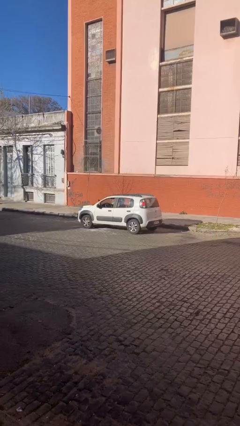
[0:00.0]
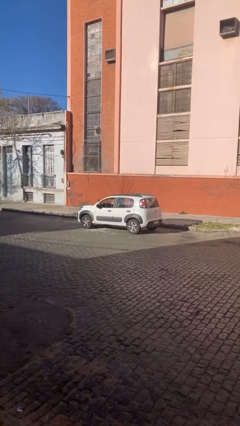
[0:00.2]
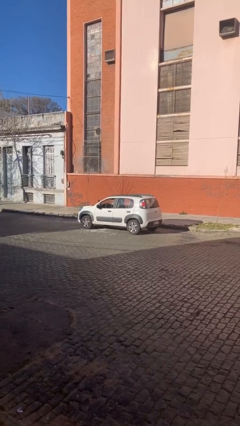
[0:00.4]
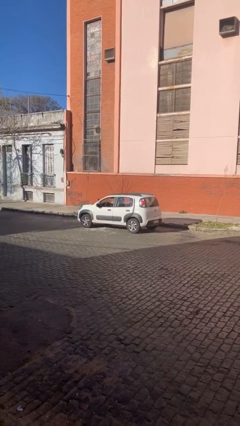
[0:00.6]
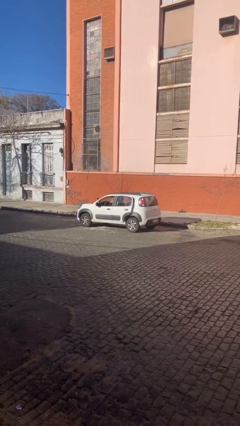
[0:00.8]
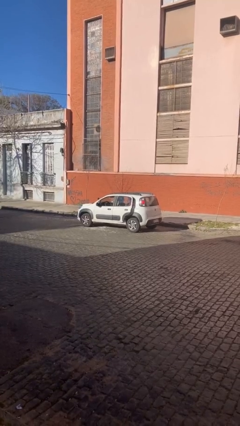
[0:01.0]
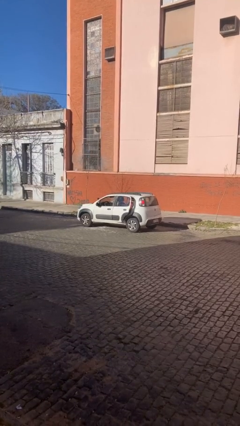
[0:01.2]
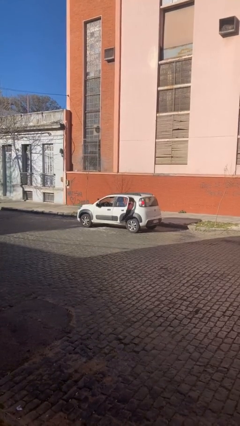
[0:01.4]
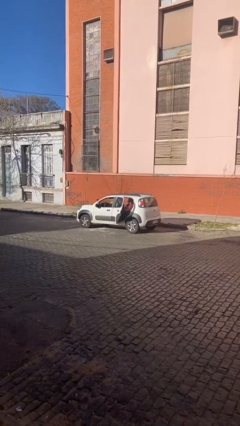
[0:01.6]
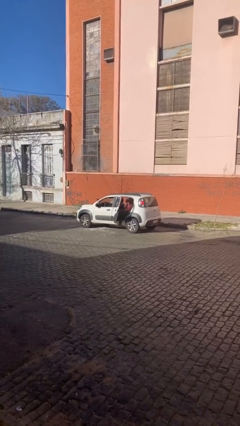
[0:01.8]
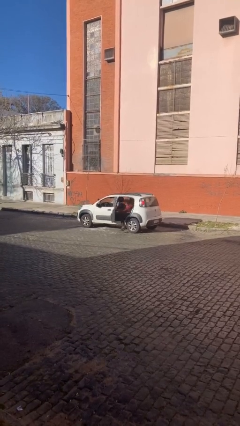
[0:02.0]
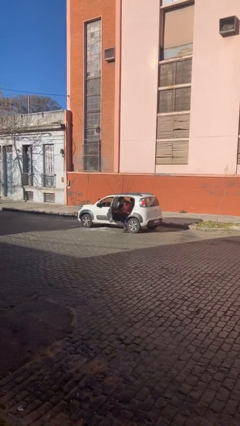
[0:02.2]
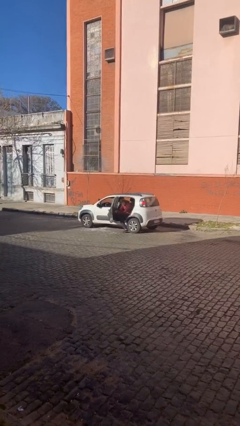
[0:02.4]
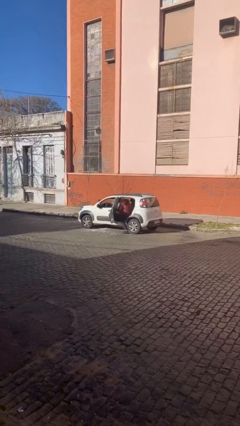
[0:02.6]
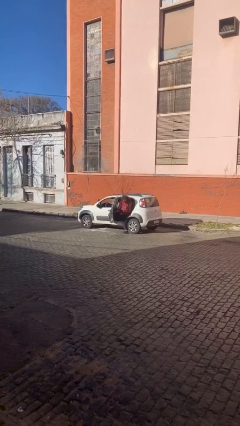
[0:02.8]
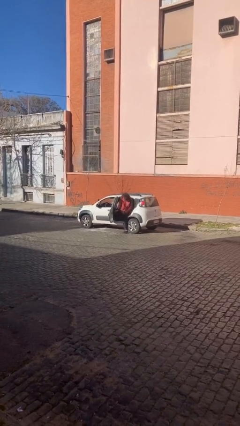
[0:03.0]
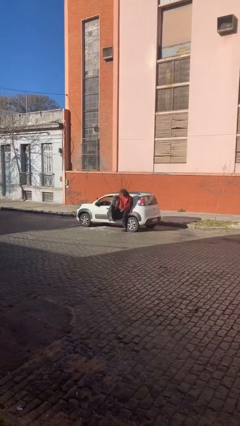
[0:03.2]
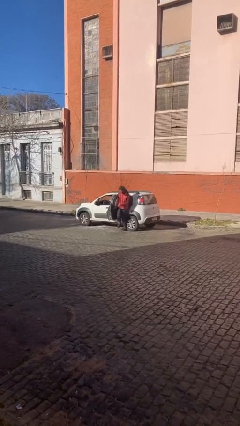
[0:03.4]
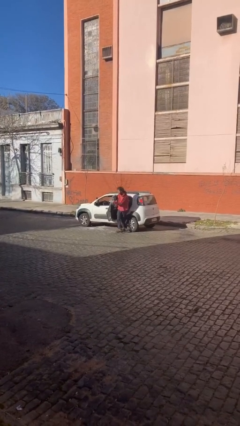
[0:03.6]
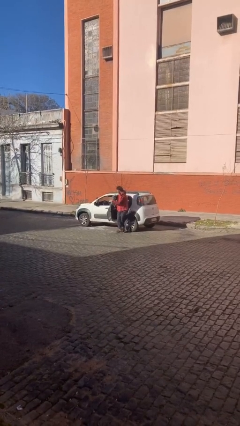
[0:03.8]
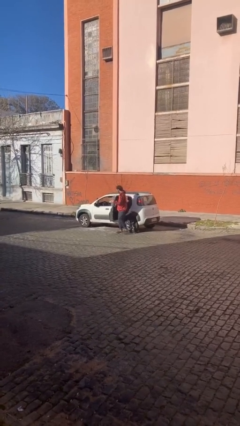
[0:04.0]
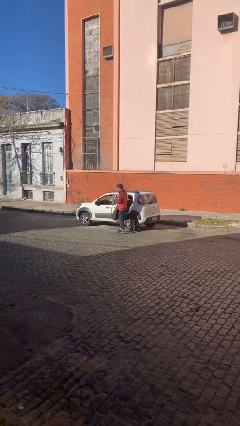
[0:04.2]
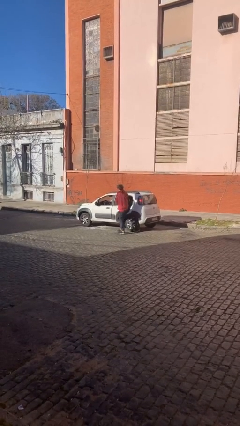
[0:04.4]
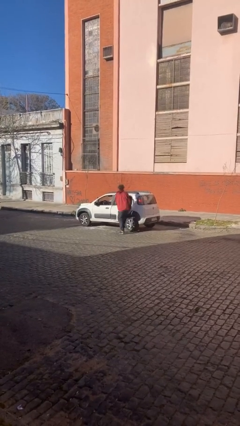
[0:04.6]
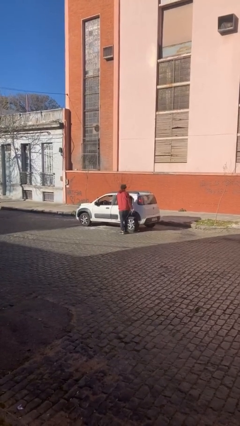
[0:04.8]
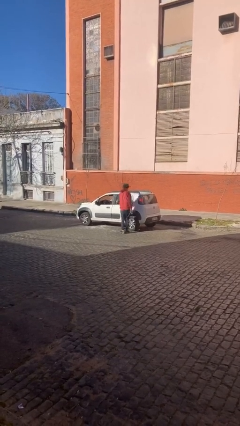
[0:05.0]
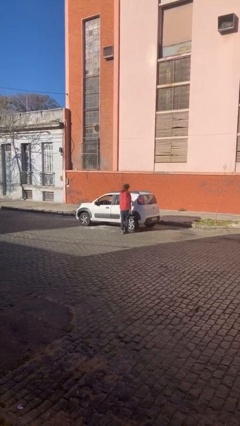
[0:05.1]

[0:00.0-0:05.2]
car drops off person

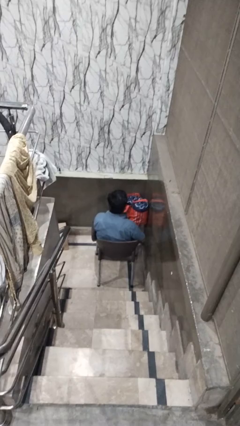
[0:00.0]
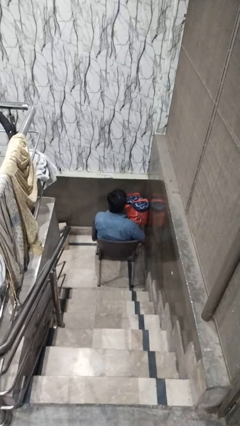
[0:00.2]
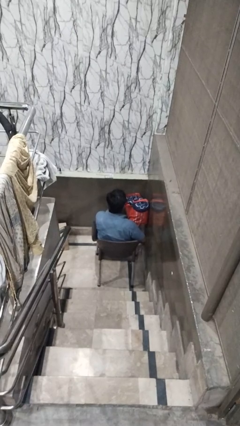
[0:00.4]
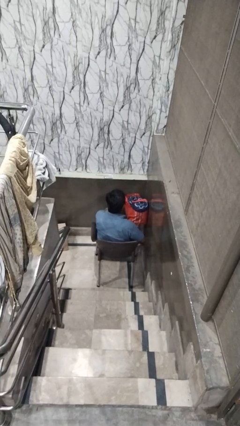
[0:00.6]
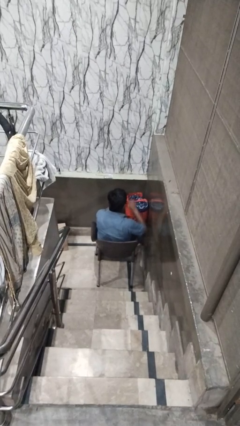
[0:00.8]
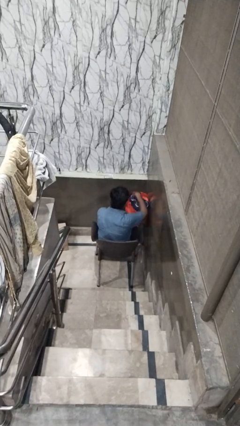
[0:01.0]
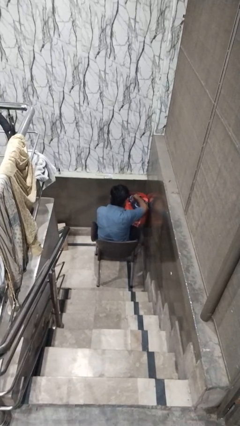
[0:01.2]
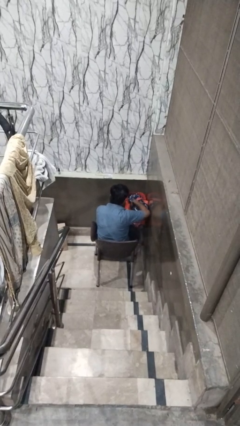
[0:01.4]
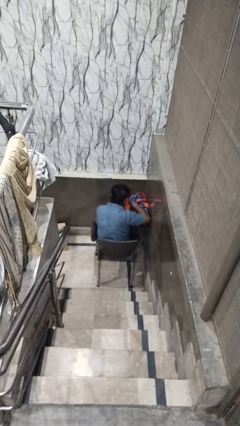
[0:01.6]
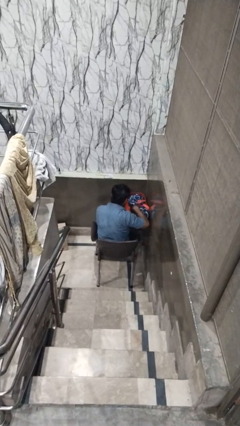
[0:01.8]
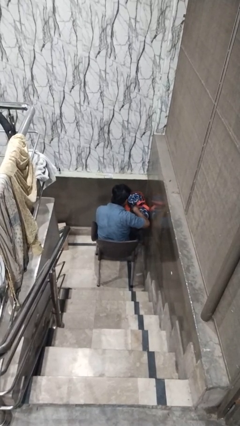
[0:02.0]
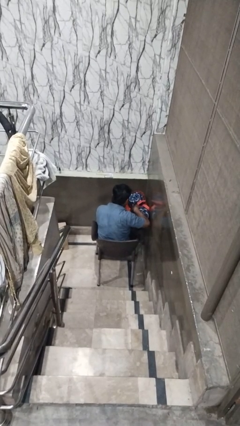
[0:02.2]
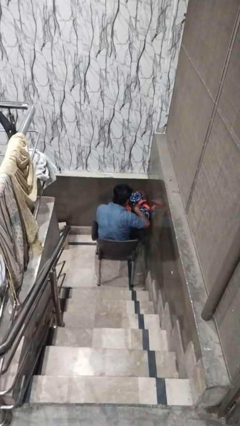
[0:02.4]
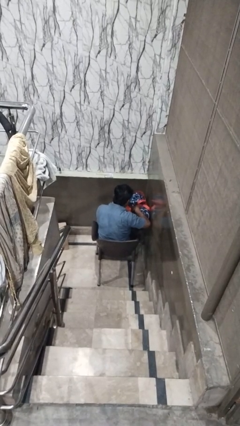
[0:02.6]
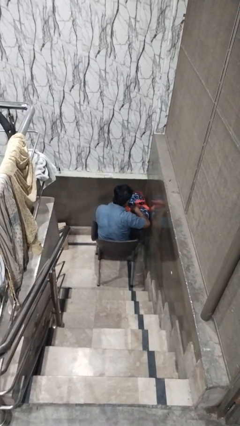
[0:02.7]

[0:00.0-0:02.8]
person searches in bag

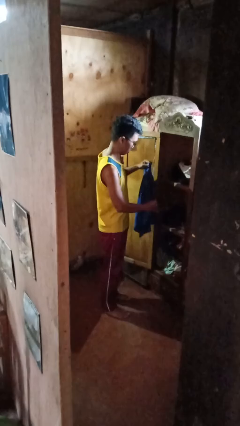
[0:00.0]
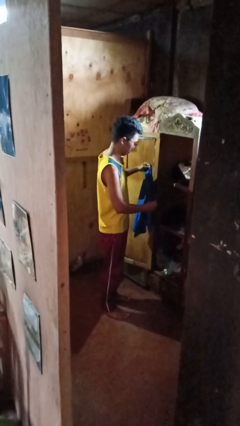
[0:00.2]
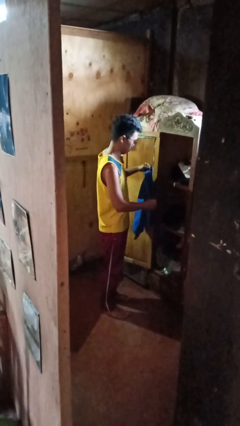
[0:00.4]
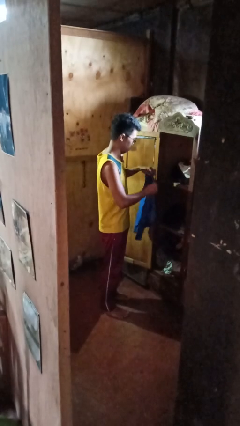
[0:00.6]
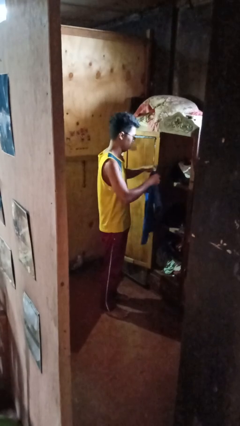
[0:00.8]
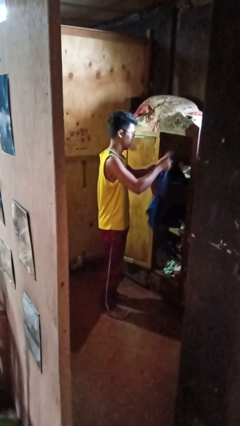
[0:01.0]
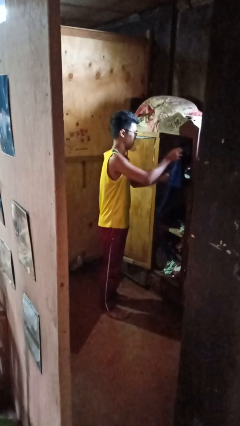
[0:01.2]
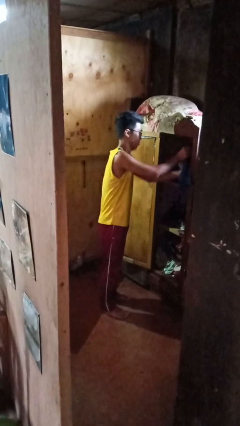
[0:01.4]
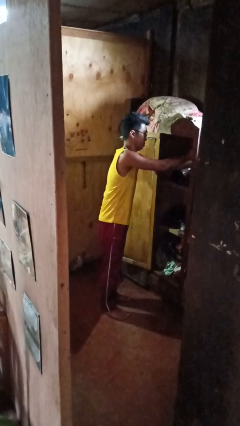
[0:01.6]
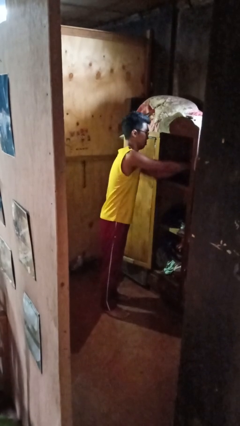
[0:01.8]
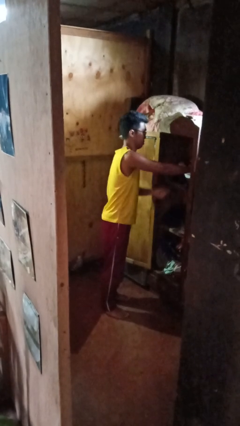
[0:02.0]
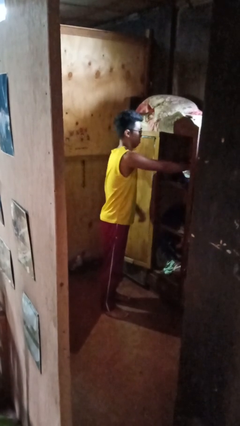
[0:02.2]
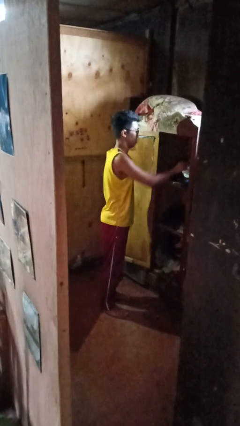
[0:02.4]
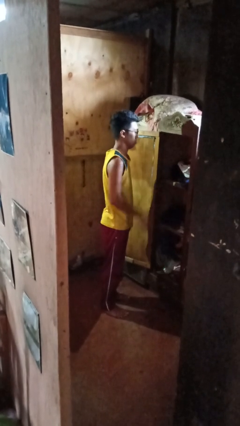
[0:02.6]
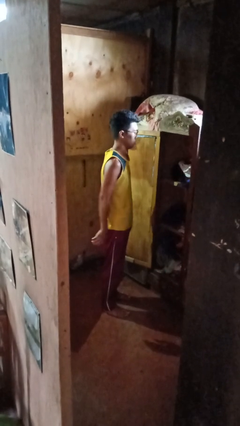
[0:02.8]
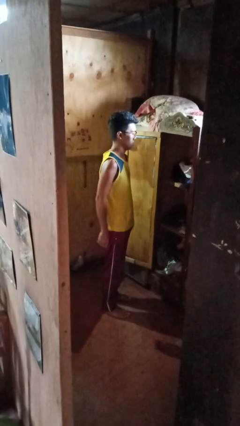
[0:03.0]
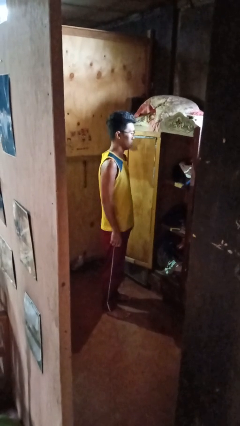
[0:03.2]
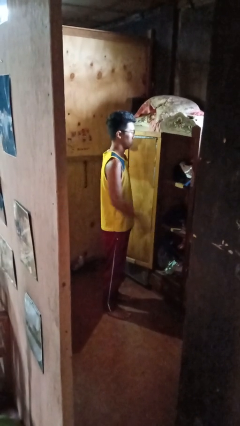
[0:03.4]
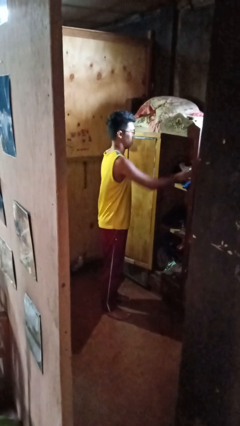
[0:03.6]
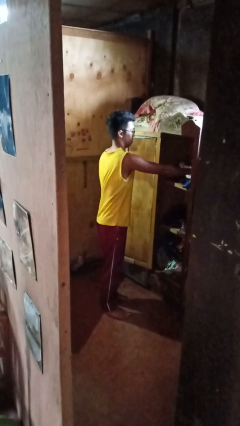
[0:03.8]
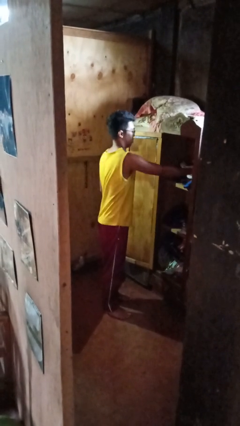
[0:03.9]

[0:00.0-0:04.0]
person puts clothes into closet

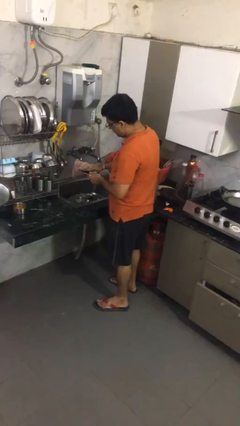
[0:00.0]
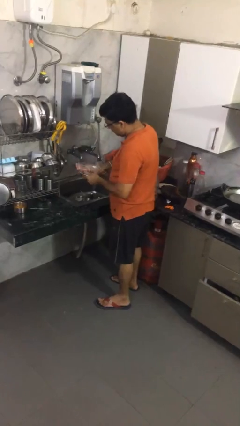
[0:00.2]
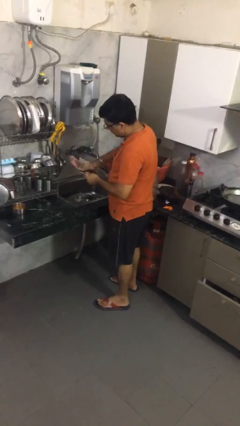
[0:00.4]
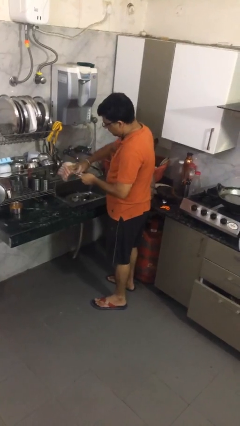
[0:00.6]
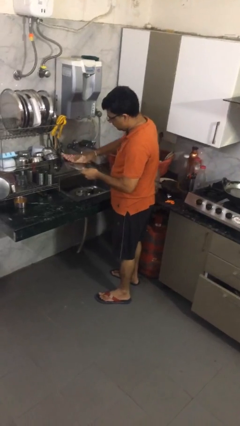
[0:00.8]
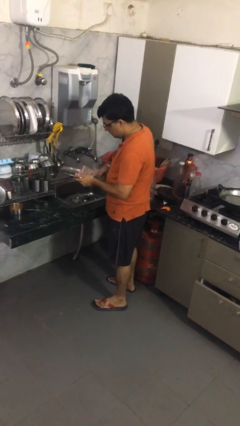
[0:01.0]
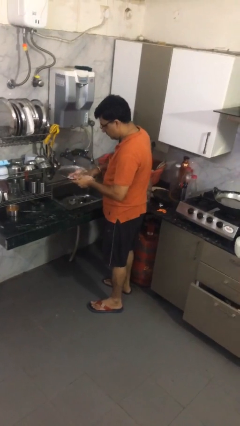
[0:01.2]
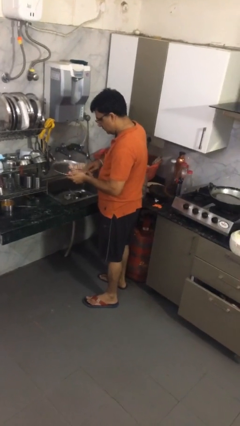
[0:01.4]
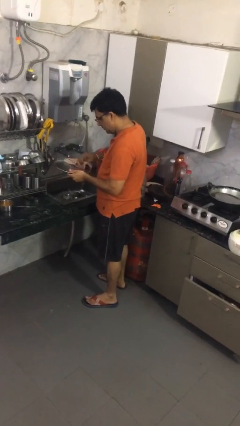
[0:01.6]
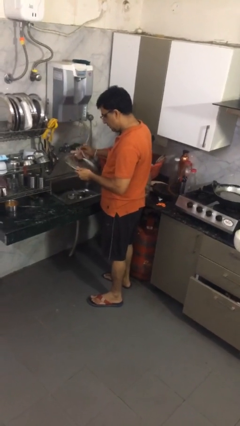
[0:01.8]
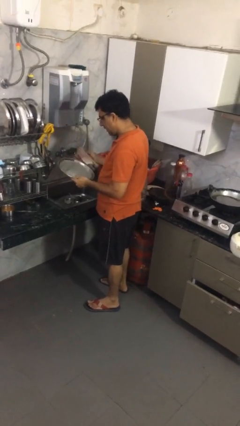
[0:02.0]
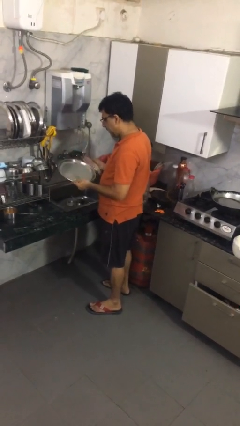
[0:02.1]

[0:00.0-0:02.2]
person dries dish

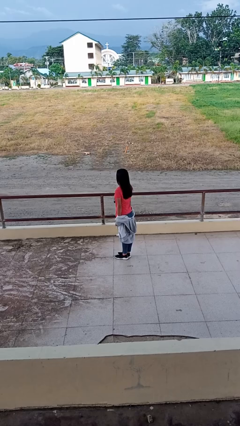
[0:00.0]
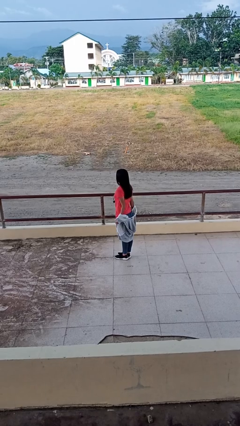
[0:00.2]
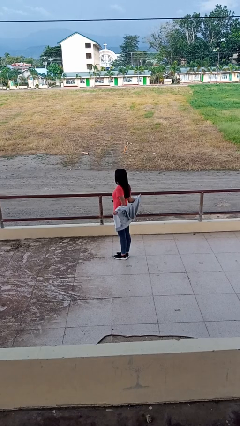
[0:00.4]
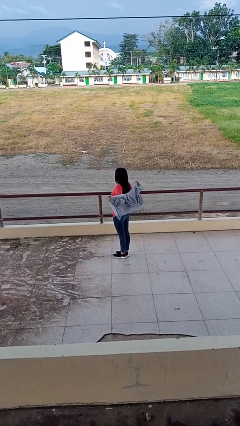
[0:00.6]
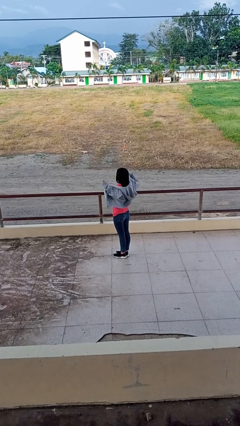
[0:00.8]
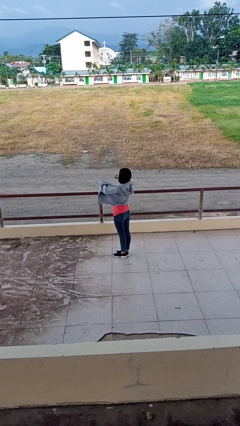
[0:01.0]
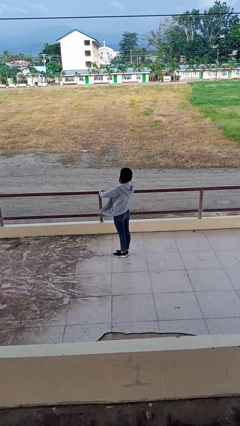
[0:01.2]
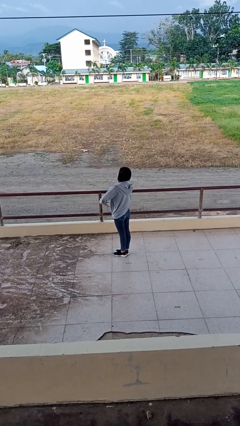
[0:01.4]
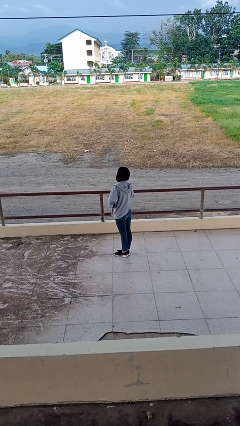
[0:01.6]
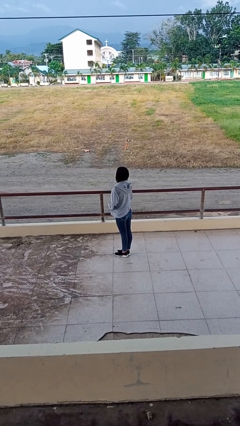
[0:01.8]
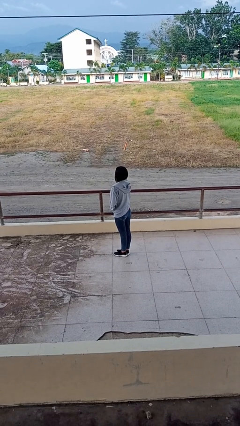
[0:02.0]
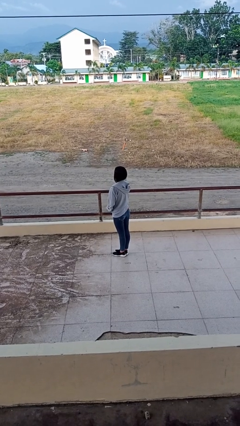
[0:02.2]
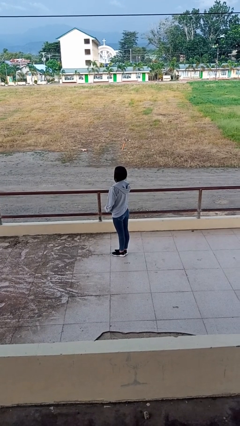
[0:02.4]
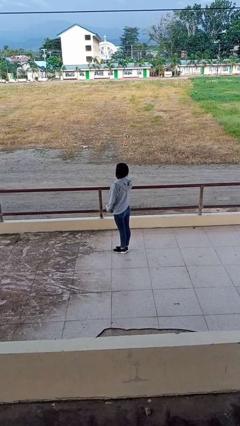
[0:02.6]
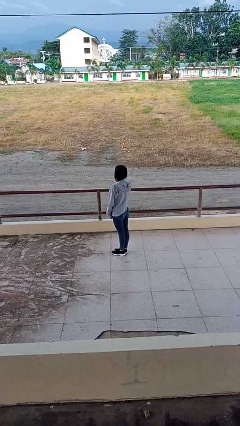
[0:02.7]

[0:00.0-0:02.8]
person puts on jacket

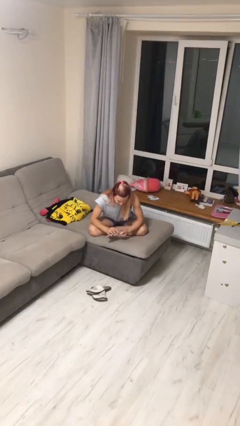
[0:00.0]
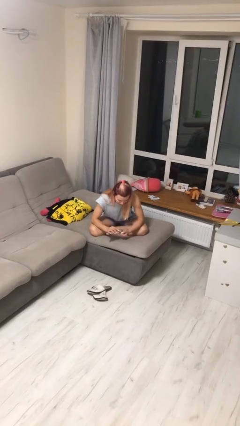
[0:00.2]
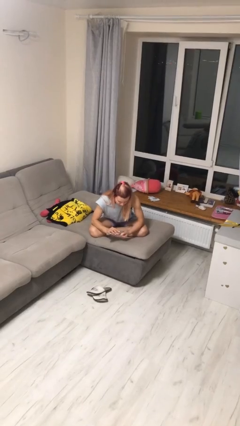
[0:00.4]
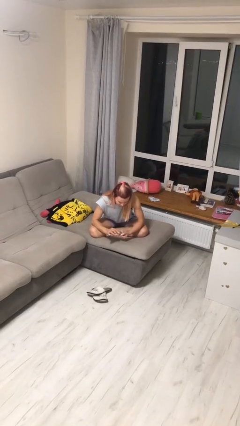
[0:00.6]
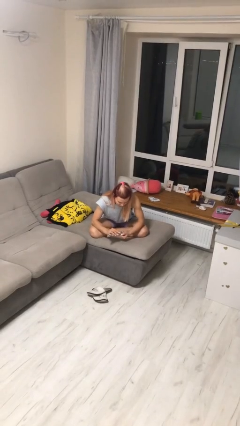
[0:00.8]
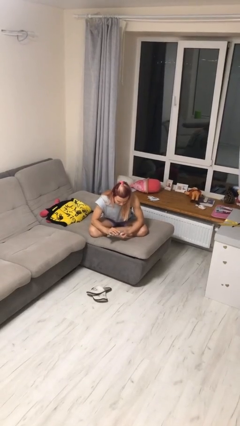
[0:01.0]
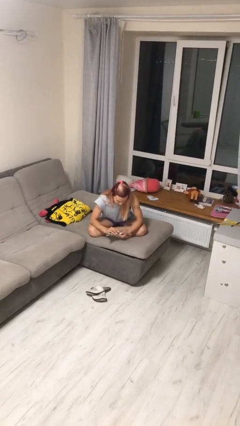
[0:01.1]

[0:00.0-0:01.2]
person files fingernails
